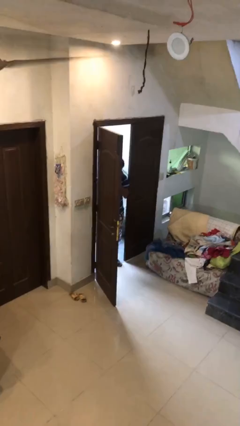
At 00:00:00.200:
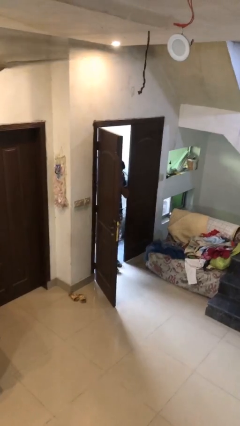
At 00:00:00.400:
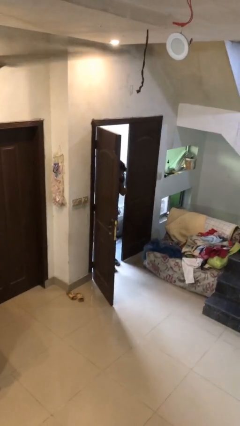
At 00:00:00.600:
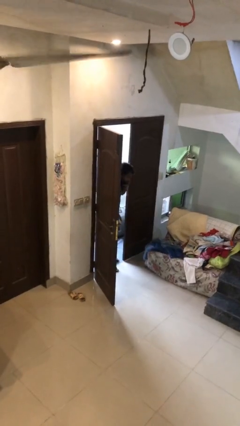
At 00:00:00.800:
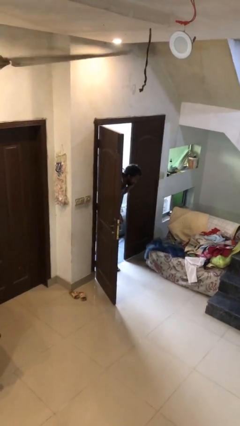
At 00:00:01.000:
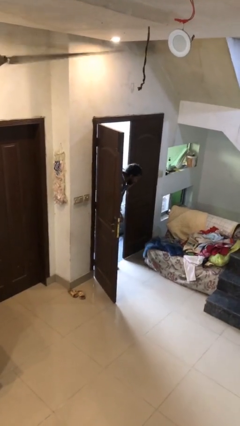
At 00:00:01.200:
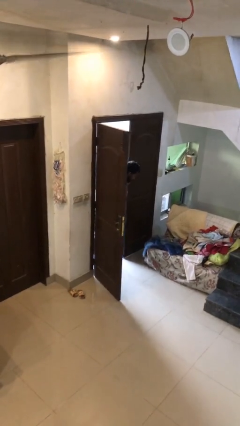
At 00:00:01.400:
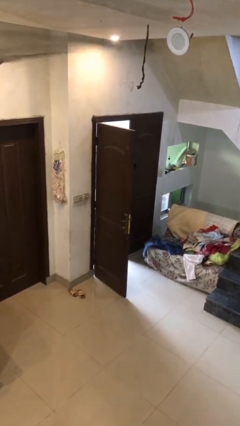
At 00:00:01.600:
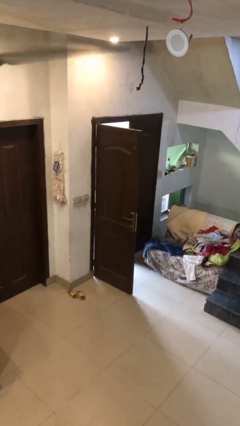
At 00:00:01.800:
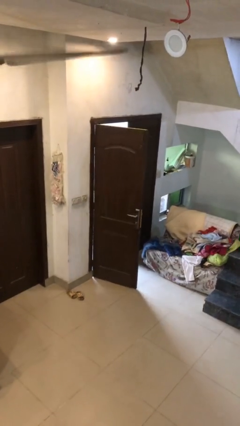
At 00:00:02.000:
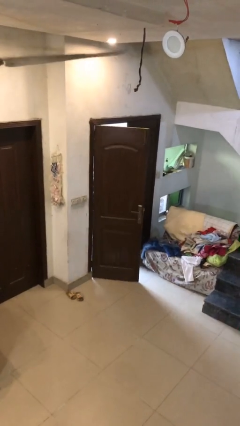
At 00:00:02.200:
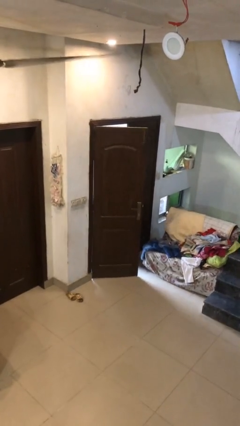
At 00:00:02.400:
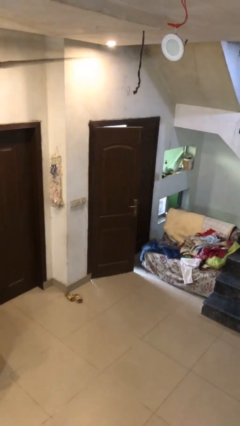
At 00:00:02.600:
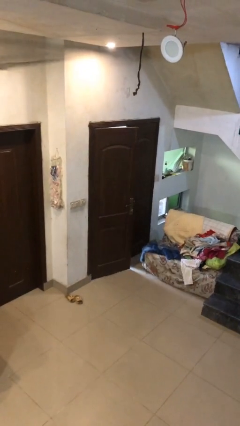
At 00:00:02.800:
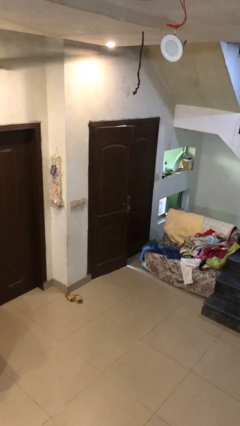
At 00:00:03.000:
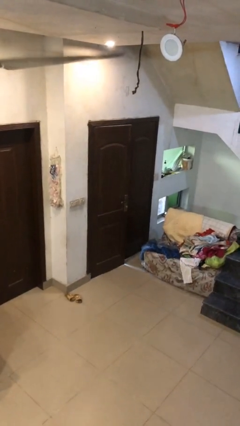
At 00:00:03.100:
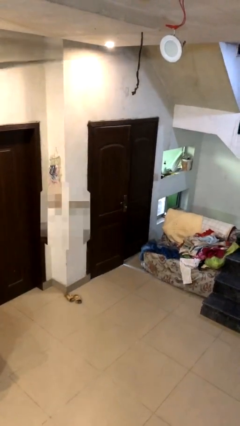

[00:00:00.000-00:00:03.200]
person closes facility door

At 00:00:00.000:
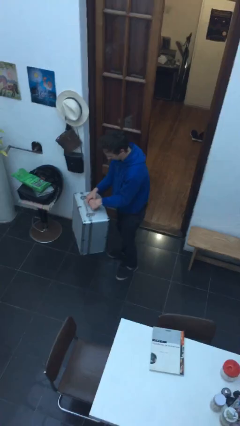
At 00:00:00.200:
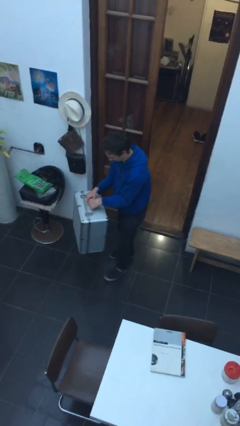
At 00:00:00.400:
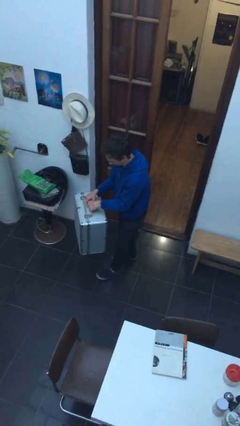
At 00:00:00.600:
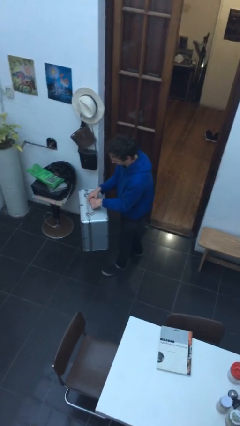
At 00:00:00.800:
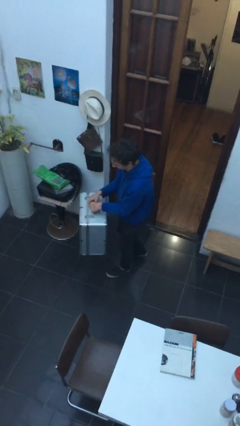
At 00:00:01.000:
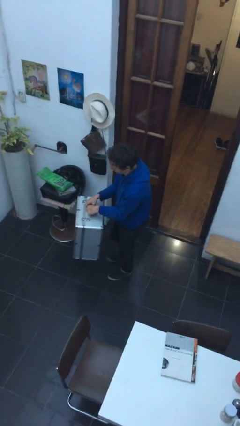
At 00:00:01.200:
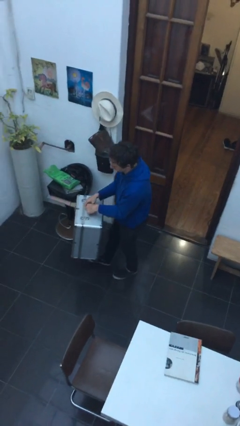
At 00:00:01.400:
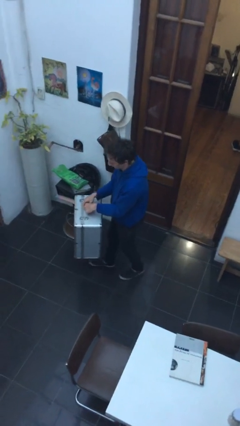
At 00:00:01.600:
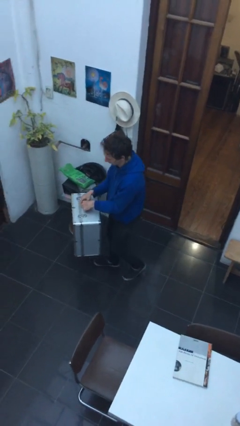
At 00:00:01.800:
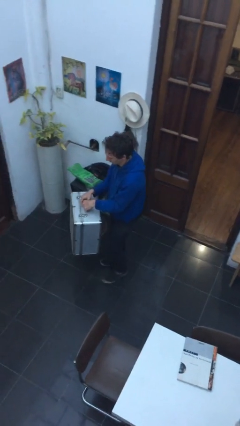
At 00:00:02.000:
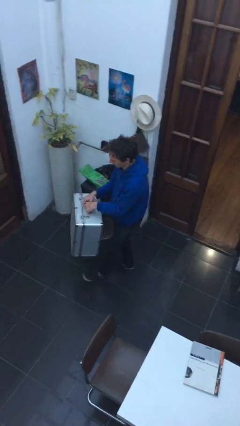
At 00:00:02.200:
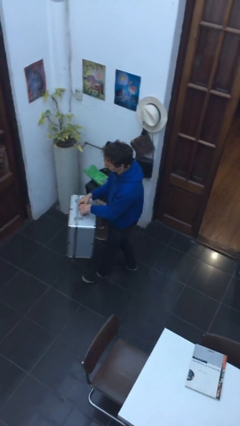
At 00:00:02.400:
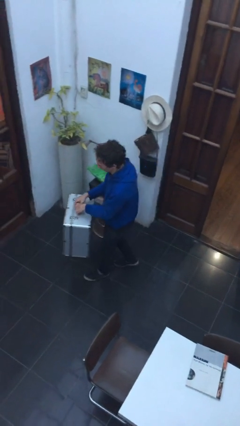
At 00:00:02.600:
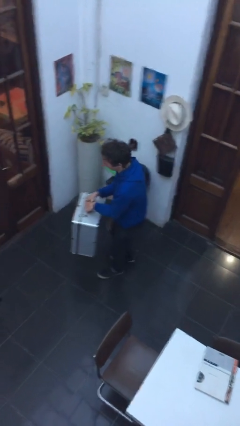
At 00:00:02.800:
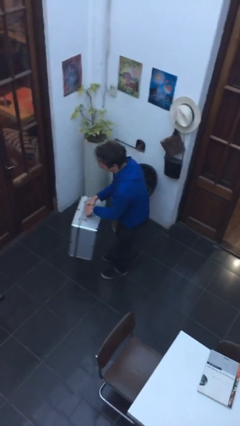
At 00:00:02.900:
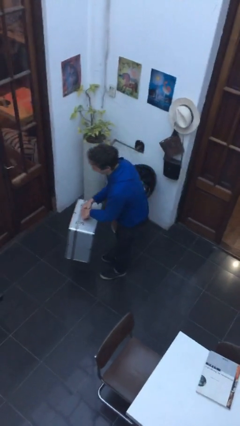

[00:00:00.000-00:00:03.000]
person carries heavy object

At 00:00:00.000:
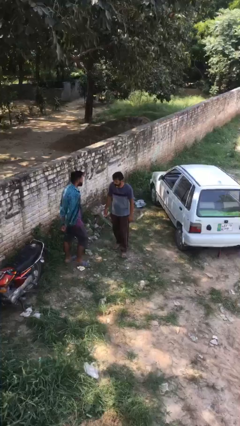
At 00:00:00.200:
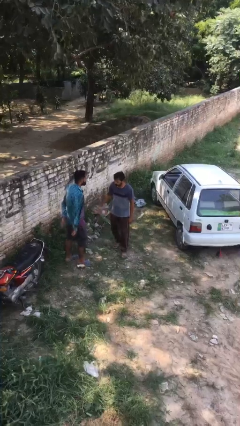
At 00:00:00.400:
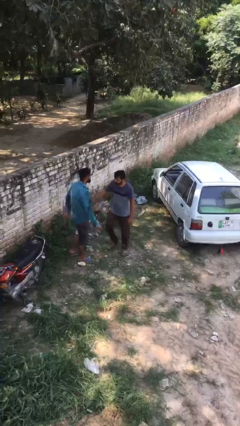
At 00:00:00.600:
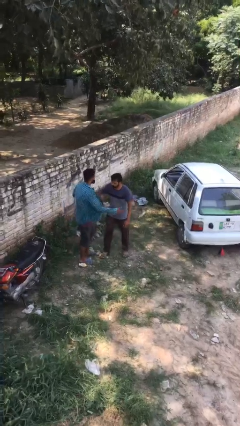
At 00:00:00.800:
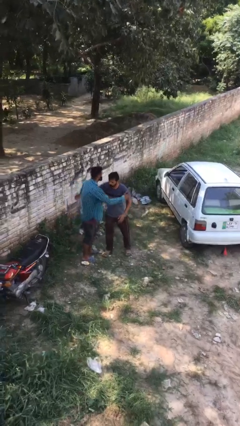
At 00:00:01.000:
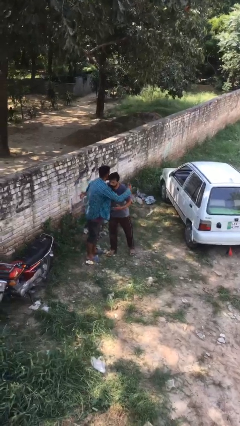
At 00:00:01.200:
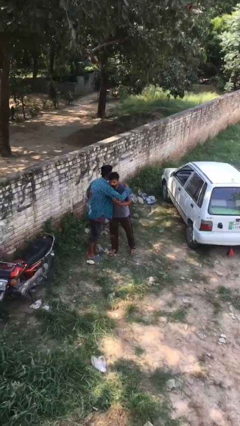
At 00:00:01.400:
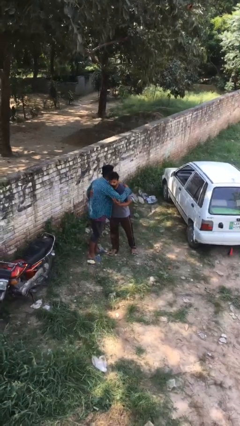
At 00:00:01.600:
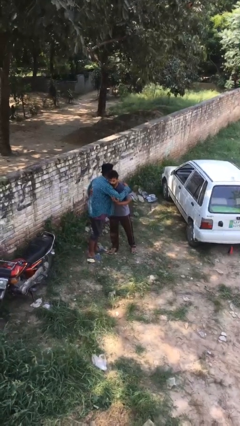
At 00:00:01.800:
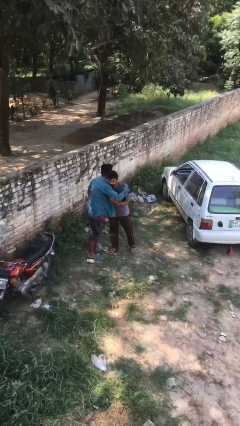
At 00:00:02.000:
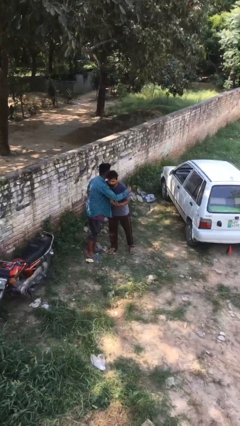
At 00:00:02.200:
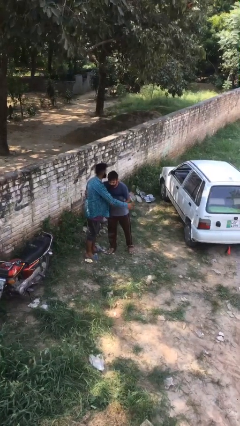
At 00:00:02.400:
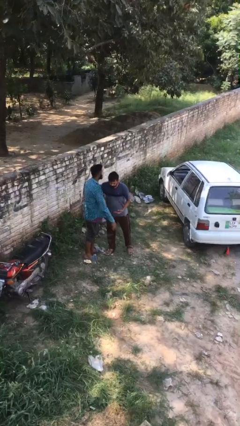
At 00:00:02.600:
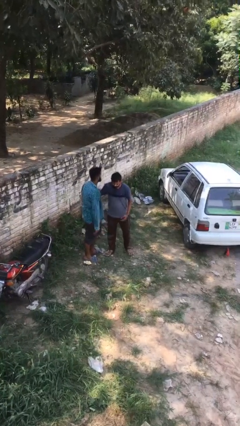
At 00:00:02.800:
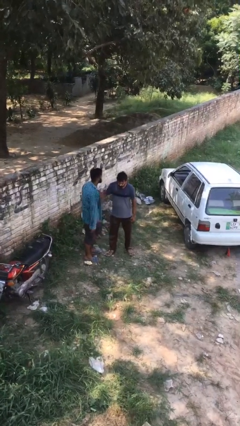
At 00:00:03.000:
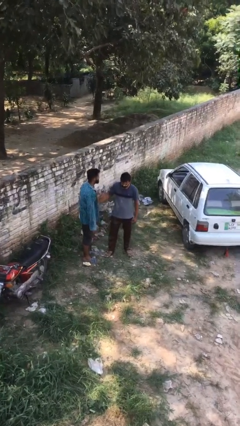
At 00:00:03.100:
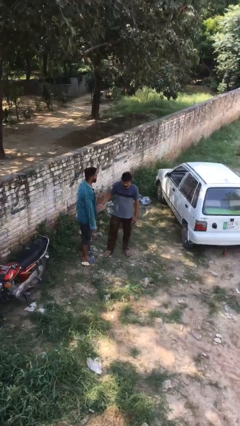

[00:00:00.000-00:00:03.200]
person embraces person

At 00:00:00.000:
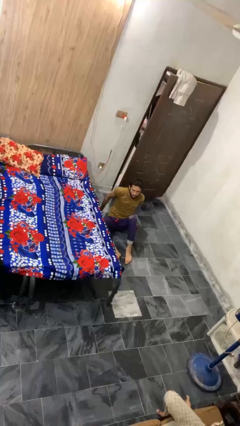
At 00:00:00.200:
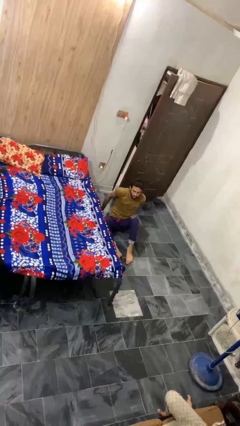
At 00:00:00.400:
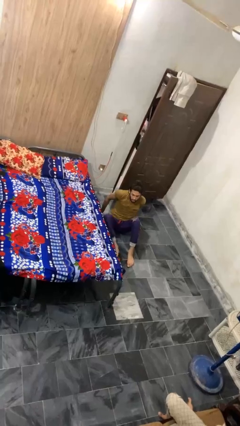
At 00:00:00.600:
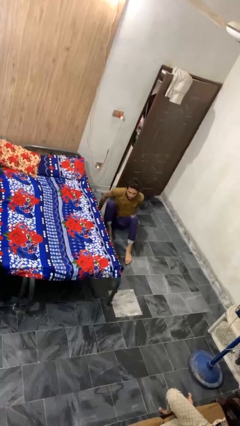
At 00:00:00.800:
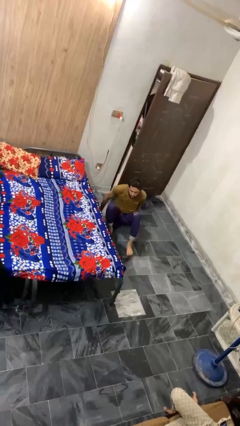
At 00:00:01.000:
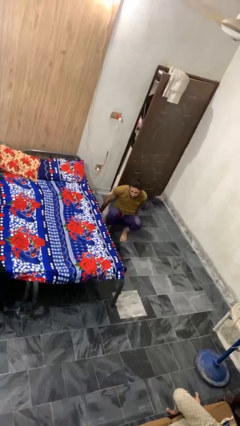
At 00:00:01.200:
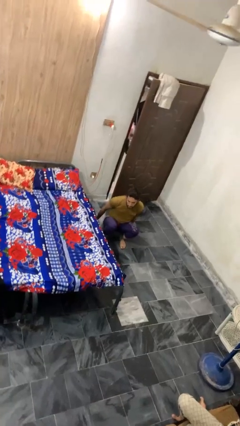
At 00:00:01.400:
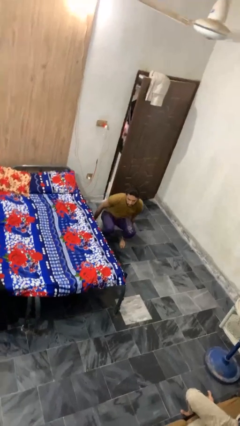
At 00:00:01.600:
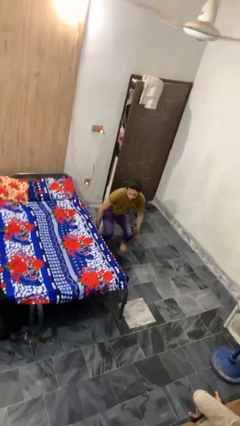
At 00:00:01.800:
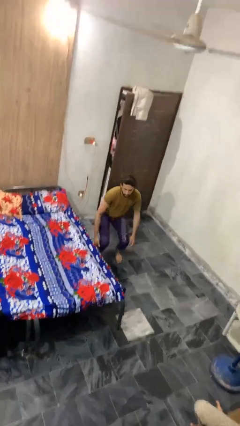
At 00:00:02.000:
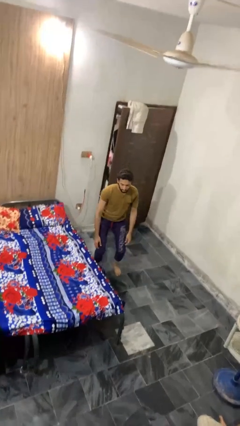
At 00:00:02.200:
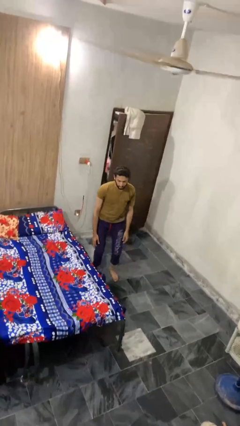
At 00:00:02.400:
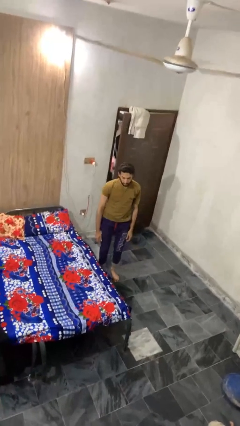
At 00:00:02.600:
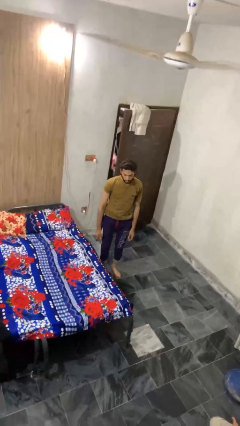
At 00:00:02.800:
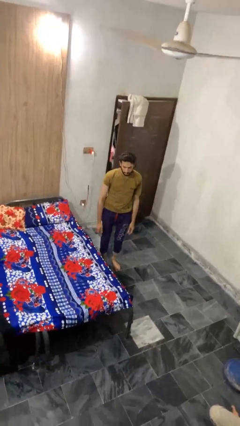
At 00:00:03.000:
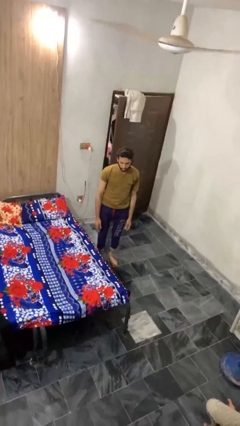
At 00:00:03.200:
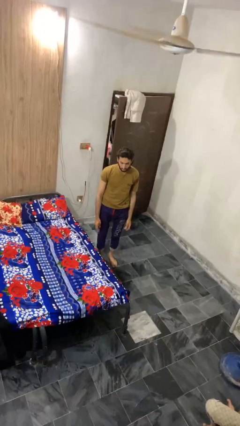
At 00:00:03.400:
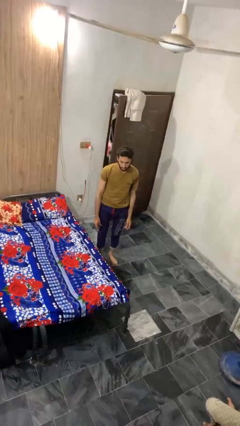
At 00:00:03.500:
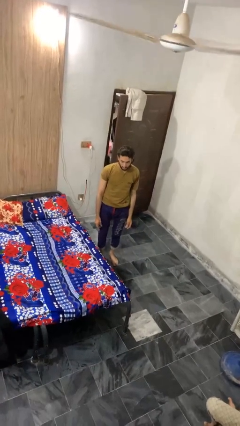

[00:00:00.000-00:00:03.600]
person stands up from floor

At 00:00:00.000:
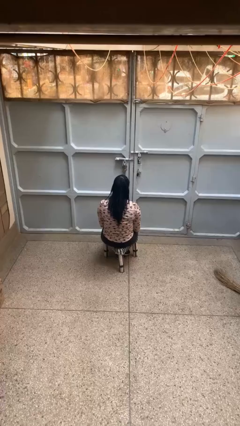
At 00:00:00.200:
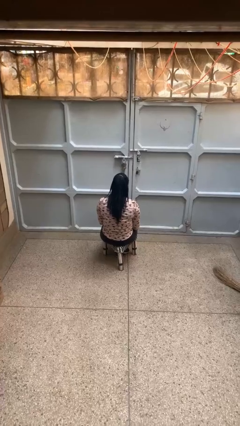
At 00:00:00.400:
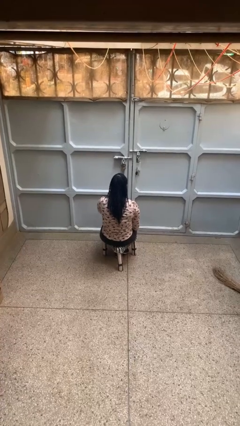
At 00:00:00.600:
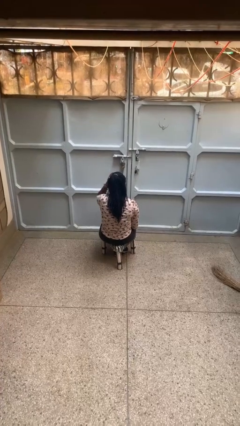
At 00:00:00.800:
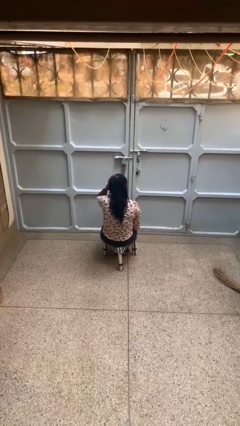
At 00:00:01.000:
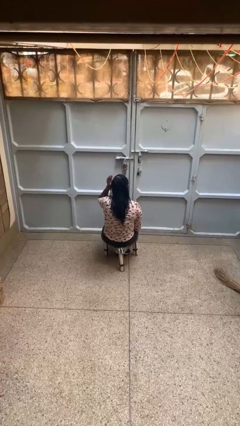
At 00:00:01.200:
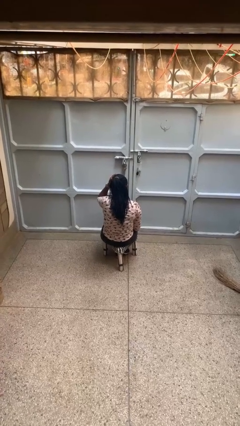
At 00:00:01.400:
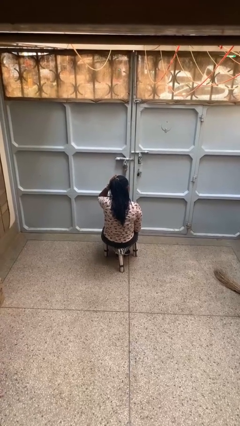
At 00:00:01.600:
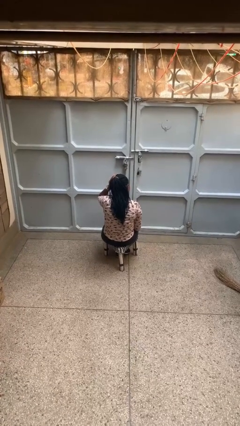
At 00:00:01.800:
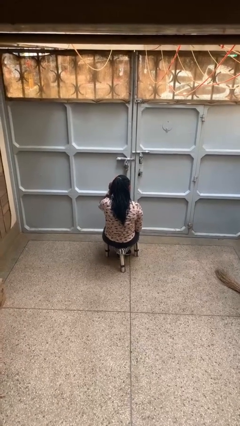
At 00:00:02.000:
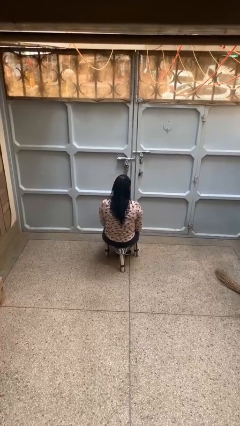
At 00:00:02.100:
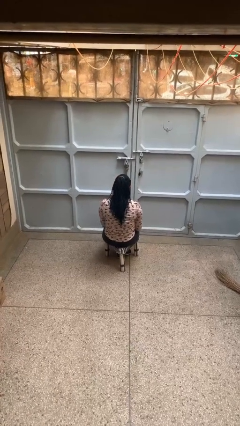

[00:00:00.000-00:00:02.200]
person strokes hair

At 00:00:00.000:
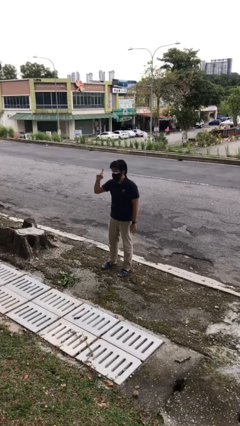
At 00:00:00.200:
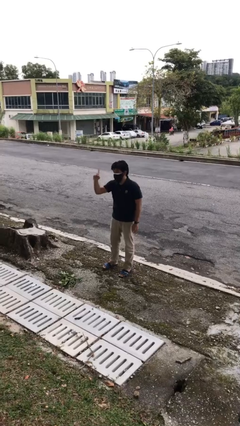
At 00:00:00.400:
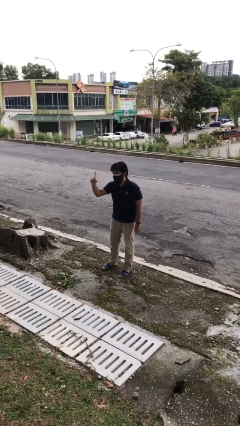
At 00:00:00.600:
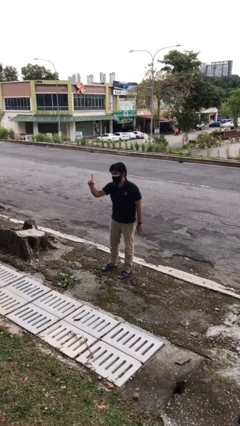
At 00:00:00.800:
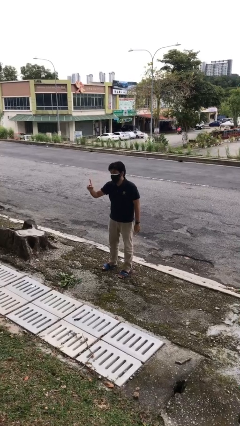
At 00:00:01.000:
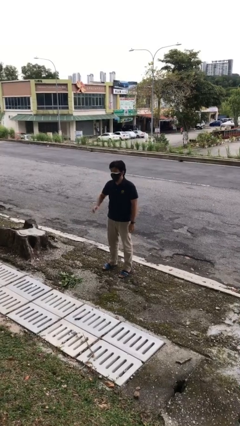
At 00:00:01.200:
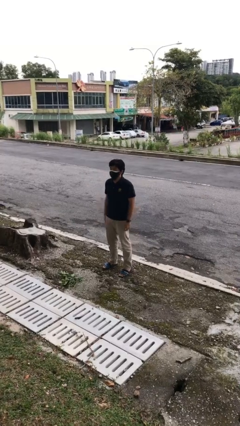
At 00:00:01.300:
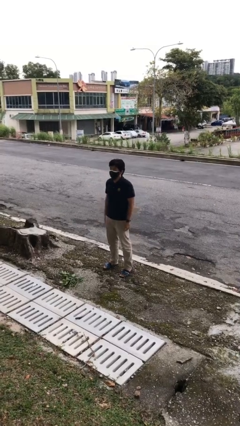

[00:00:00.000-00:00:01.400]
person gestures number one

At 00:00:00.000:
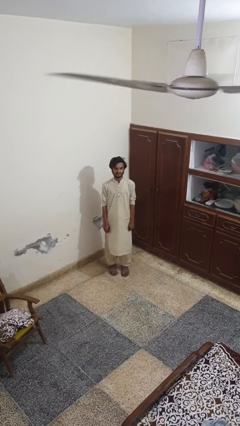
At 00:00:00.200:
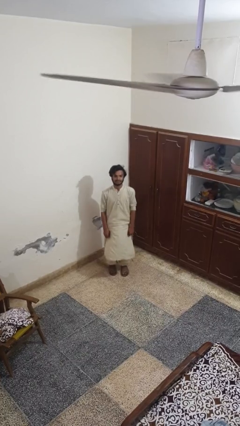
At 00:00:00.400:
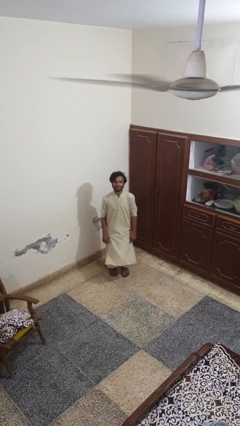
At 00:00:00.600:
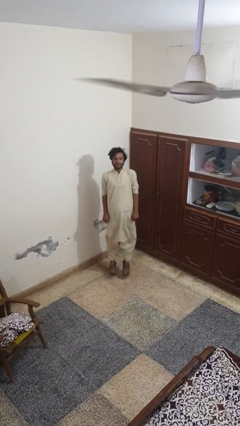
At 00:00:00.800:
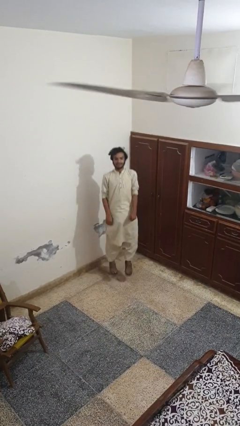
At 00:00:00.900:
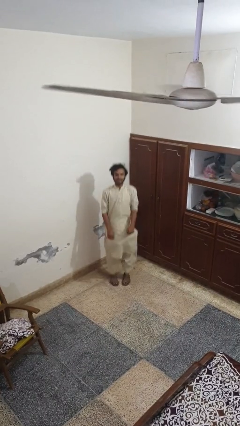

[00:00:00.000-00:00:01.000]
person jumps
